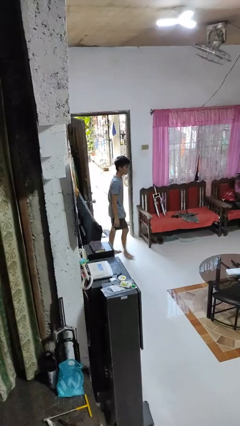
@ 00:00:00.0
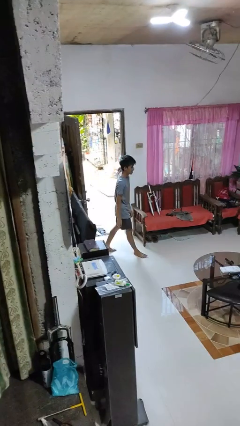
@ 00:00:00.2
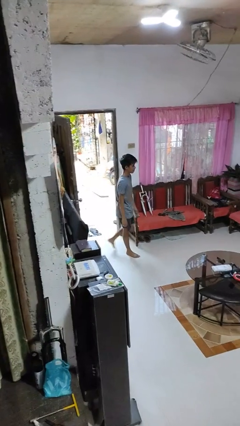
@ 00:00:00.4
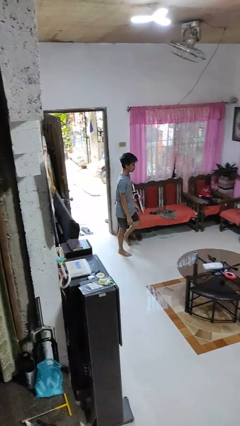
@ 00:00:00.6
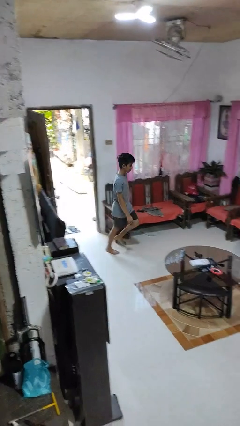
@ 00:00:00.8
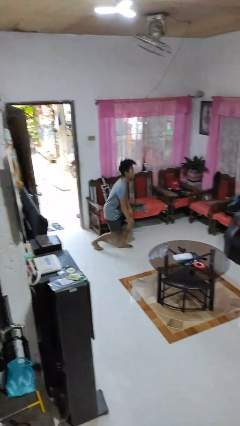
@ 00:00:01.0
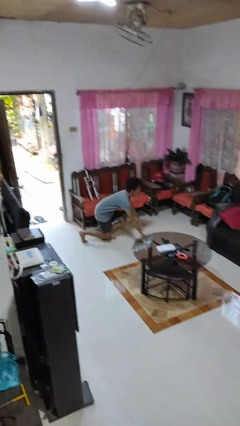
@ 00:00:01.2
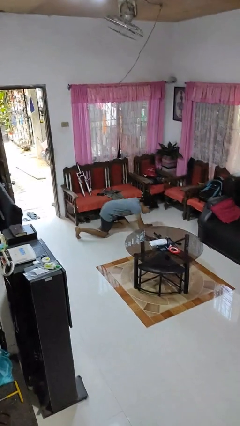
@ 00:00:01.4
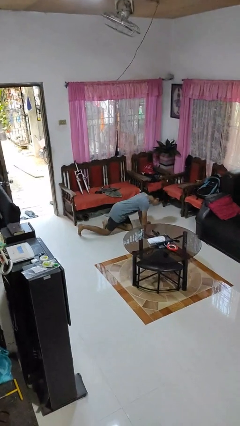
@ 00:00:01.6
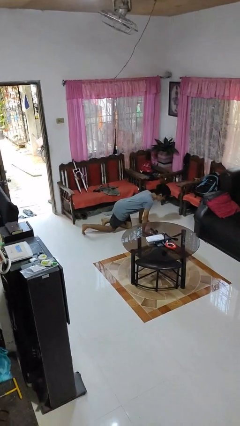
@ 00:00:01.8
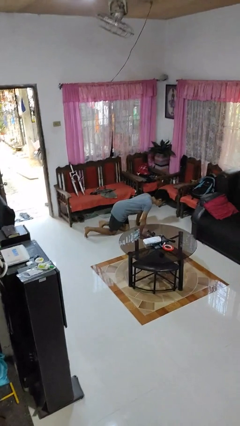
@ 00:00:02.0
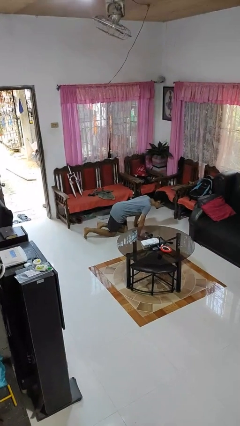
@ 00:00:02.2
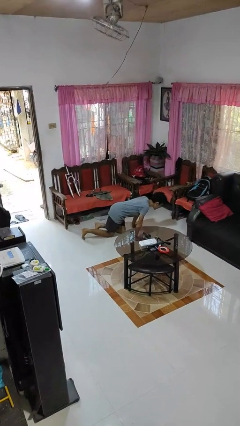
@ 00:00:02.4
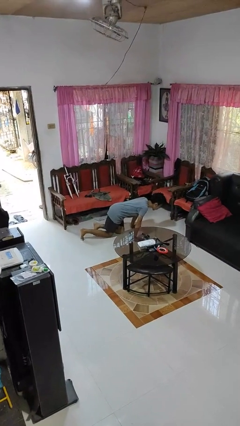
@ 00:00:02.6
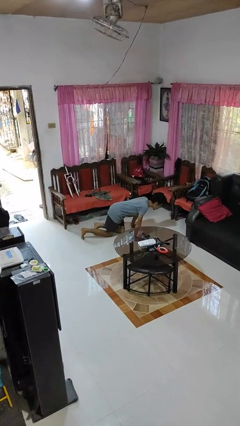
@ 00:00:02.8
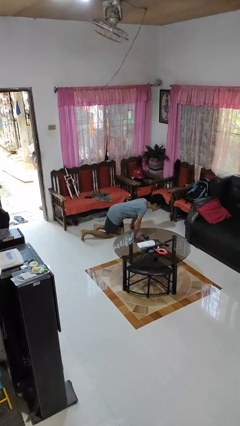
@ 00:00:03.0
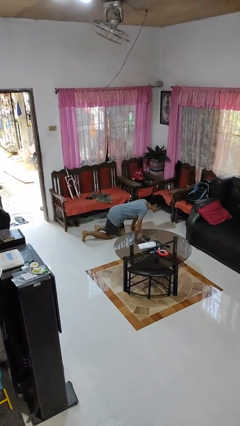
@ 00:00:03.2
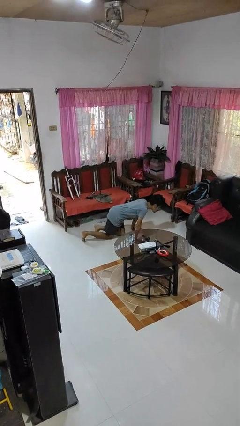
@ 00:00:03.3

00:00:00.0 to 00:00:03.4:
person trips on object on floor

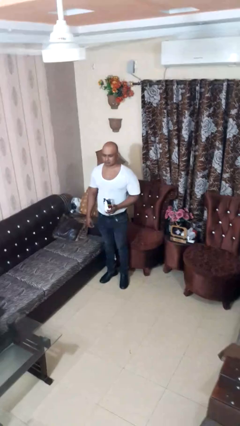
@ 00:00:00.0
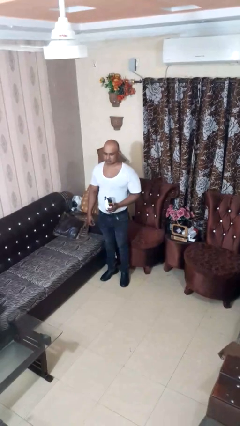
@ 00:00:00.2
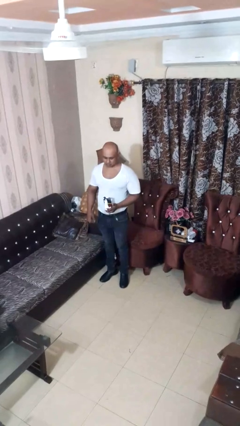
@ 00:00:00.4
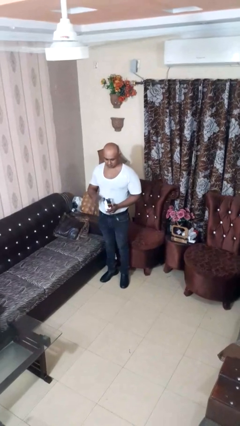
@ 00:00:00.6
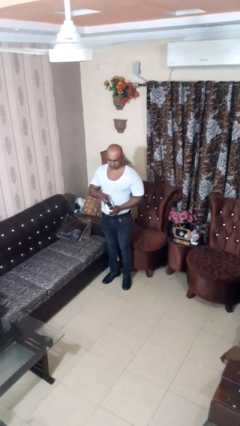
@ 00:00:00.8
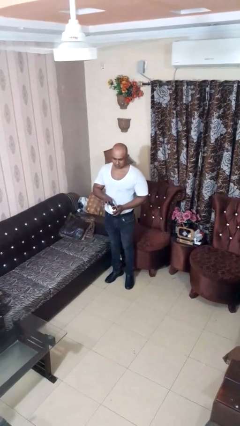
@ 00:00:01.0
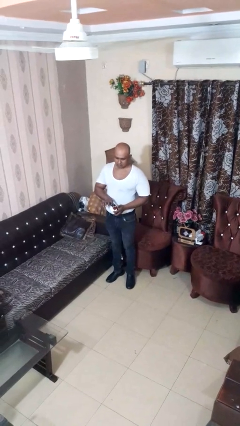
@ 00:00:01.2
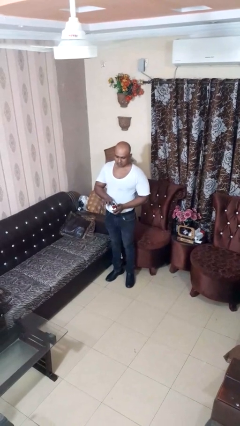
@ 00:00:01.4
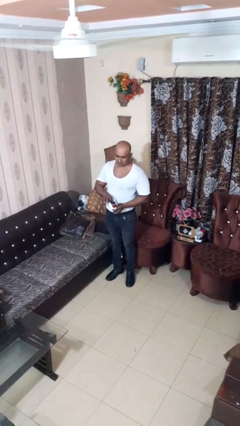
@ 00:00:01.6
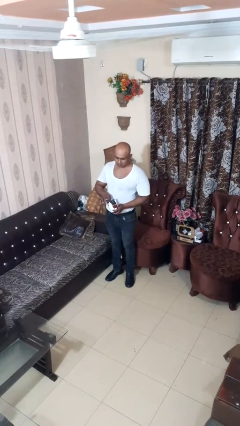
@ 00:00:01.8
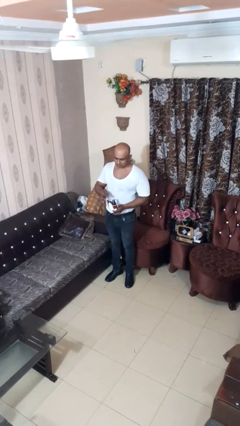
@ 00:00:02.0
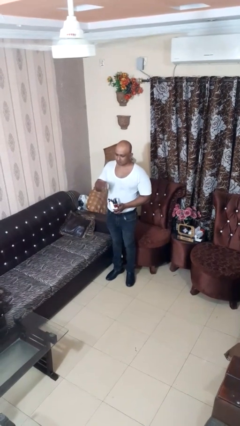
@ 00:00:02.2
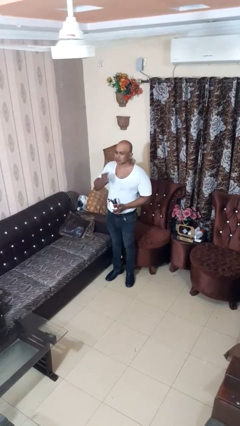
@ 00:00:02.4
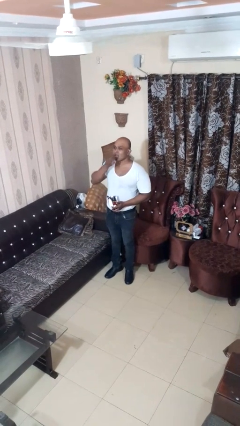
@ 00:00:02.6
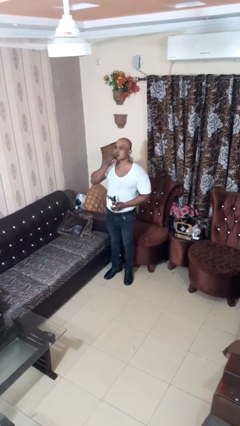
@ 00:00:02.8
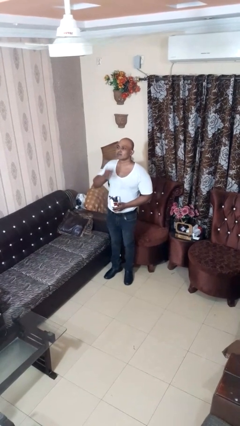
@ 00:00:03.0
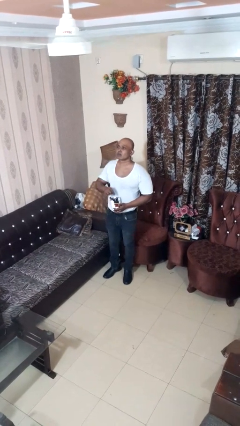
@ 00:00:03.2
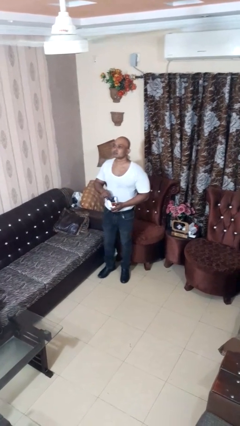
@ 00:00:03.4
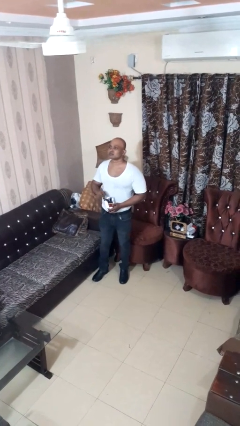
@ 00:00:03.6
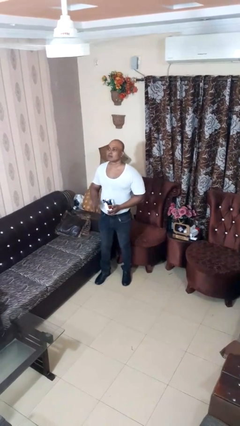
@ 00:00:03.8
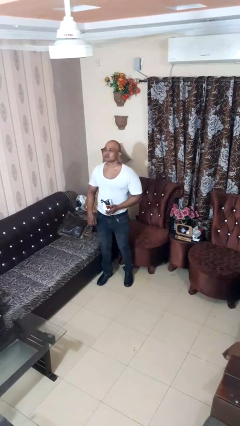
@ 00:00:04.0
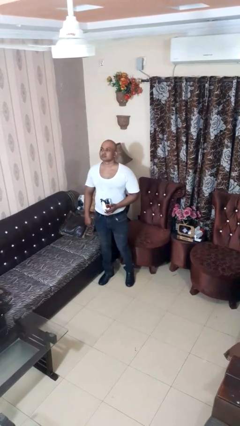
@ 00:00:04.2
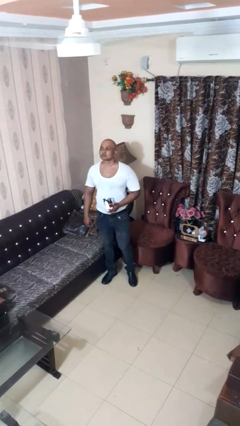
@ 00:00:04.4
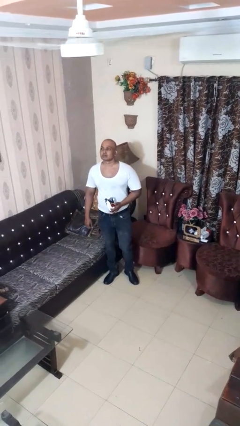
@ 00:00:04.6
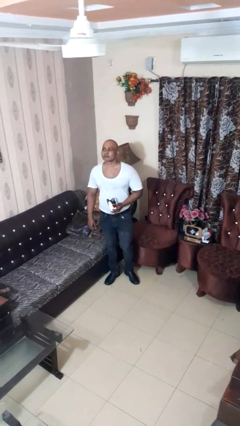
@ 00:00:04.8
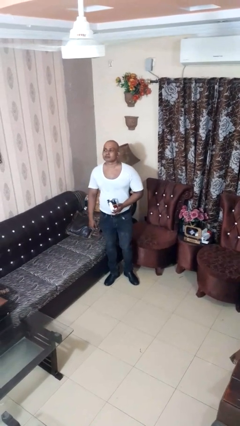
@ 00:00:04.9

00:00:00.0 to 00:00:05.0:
person eats snack from bag

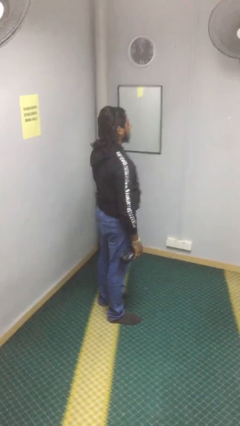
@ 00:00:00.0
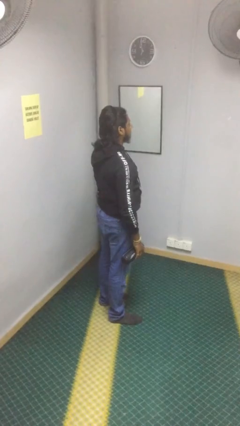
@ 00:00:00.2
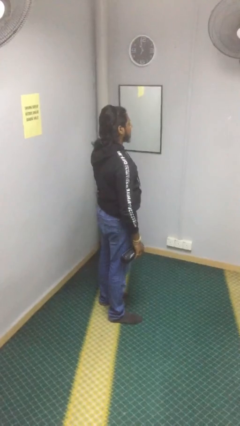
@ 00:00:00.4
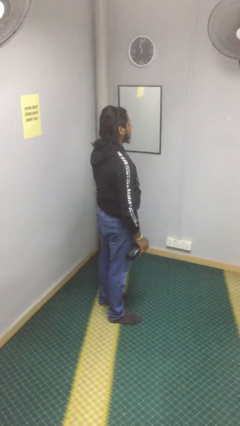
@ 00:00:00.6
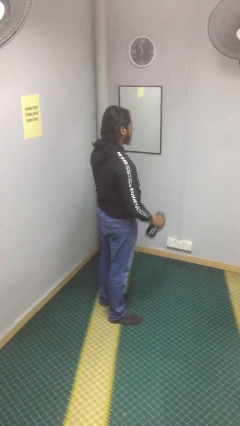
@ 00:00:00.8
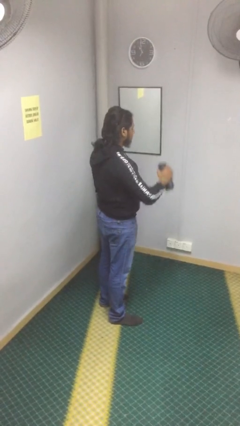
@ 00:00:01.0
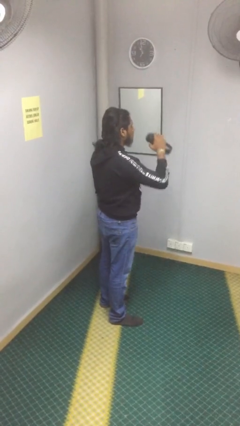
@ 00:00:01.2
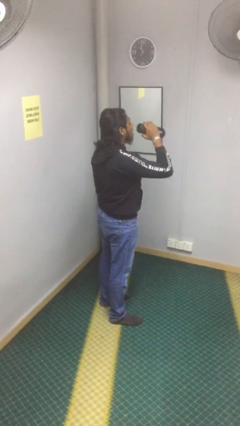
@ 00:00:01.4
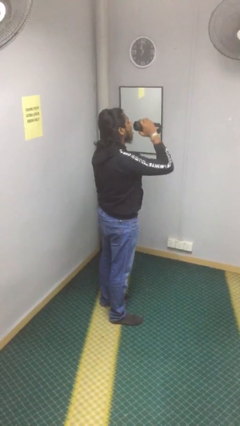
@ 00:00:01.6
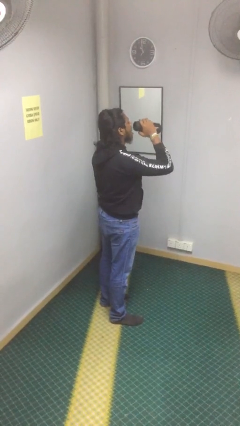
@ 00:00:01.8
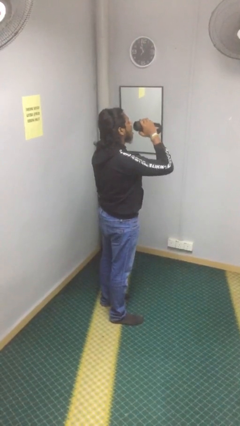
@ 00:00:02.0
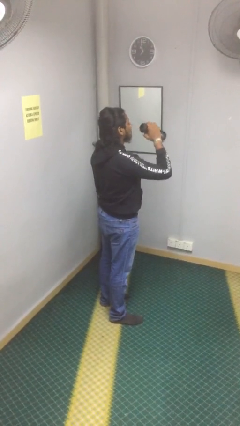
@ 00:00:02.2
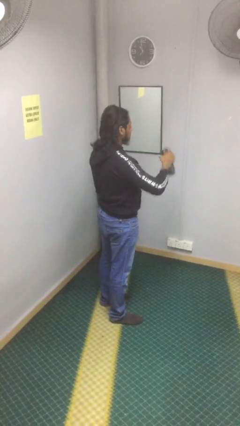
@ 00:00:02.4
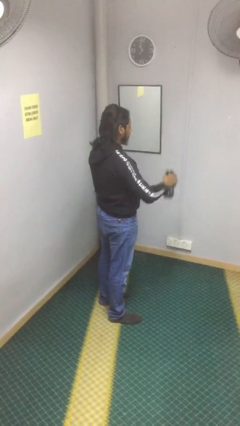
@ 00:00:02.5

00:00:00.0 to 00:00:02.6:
person drinks from bottle

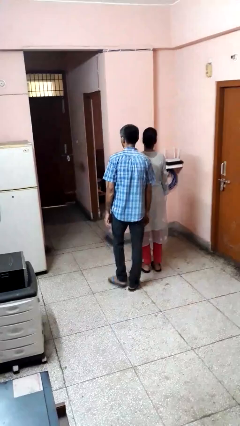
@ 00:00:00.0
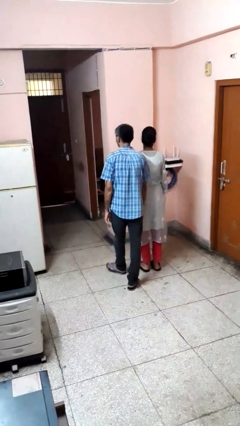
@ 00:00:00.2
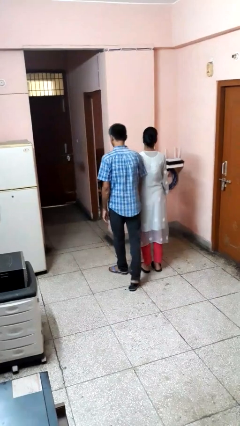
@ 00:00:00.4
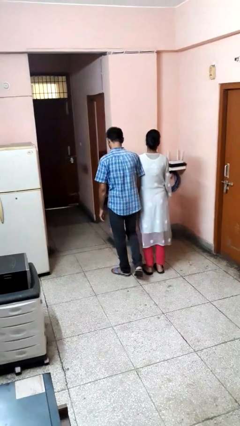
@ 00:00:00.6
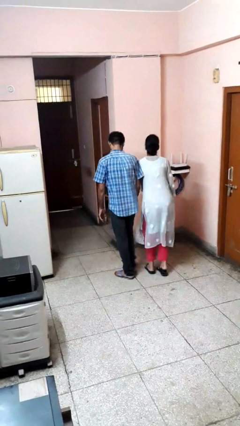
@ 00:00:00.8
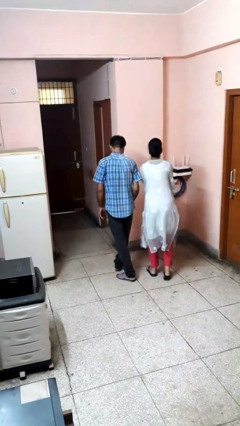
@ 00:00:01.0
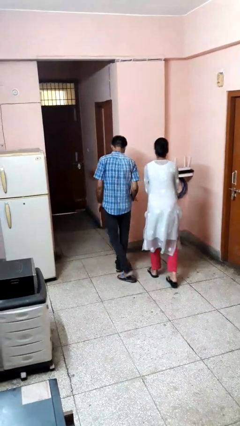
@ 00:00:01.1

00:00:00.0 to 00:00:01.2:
person bumps into person

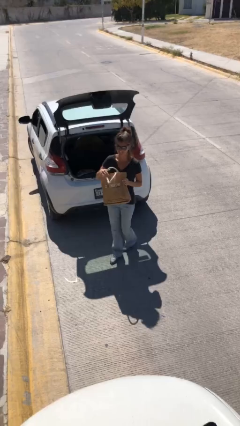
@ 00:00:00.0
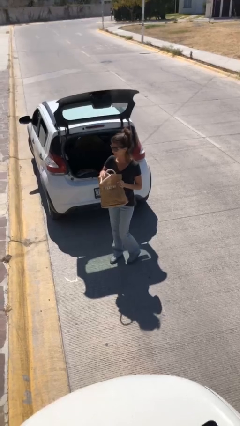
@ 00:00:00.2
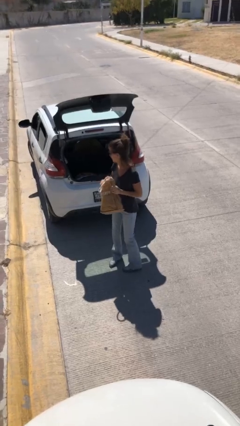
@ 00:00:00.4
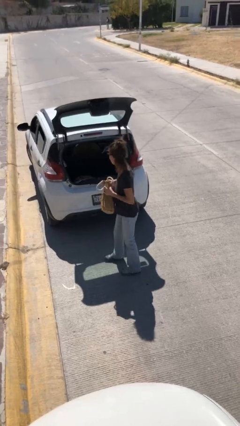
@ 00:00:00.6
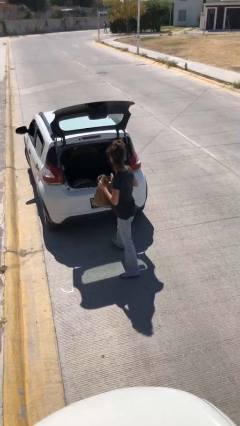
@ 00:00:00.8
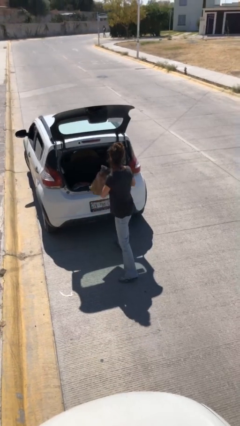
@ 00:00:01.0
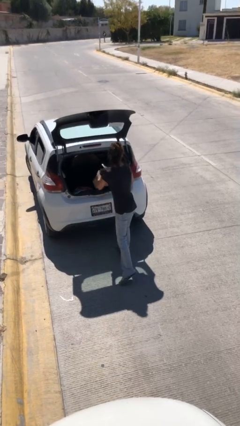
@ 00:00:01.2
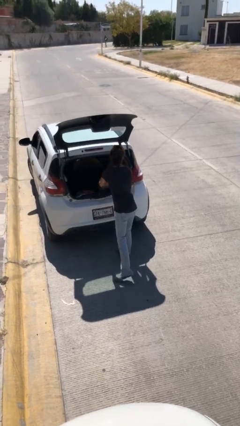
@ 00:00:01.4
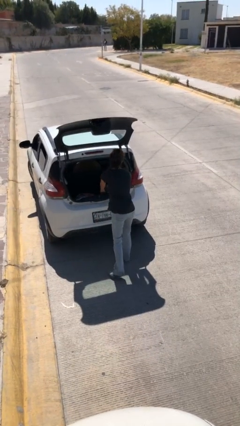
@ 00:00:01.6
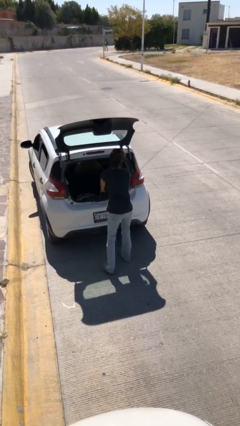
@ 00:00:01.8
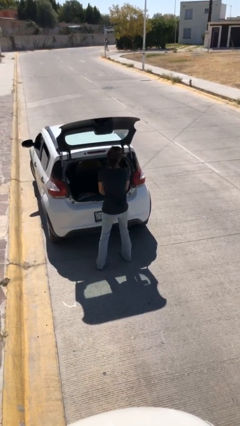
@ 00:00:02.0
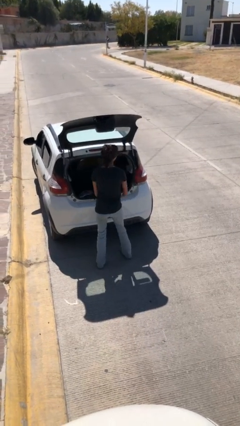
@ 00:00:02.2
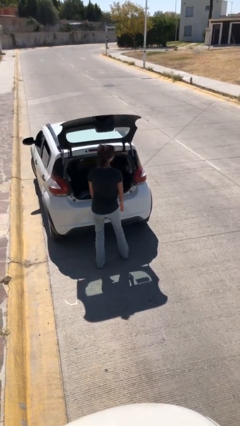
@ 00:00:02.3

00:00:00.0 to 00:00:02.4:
person loads car

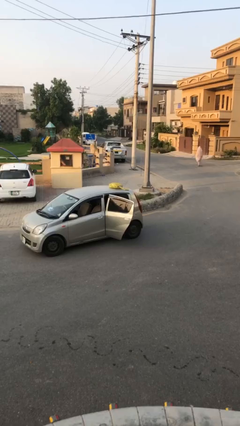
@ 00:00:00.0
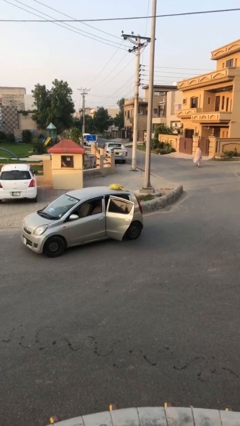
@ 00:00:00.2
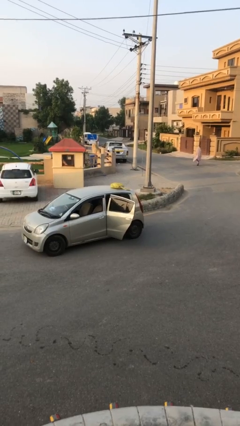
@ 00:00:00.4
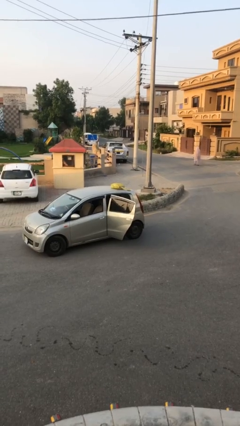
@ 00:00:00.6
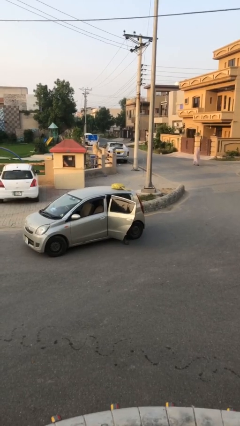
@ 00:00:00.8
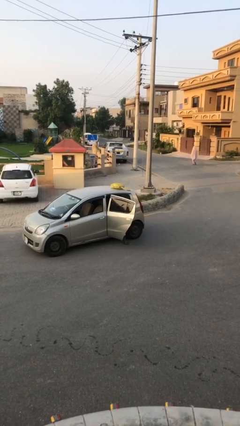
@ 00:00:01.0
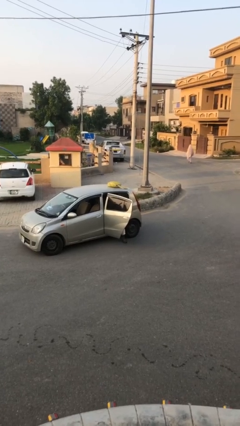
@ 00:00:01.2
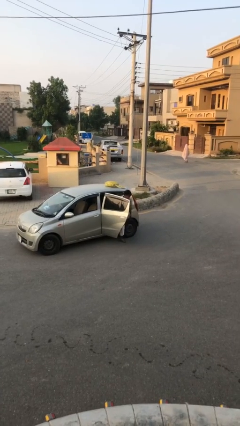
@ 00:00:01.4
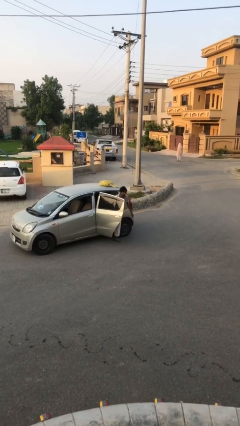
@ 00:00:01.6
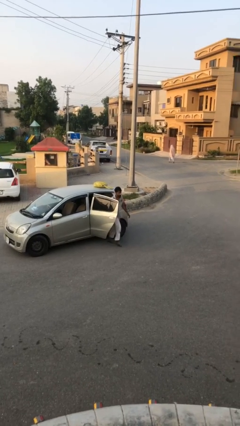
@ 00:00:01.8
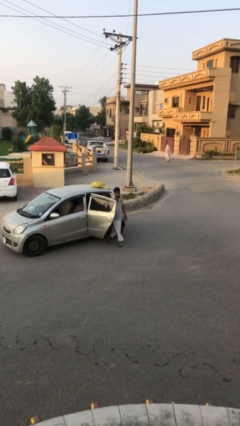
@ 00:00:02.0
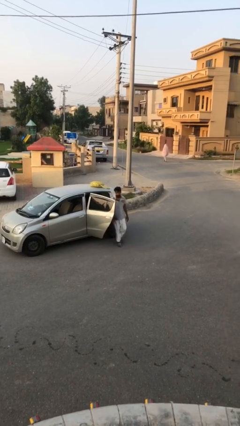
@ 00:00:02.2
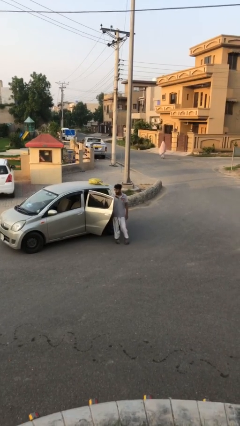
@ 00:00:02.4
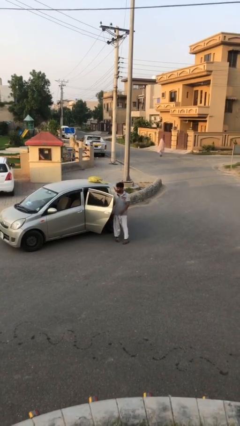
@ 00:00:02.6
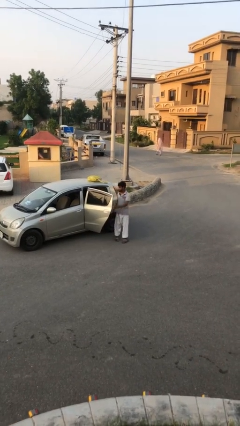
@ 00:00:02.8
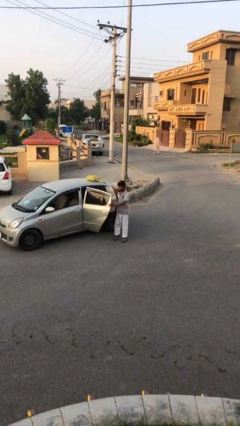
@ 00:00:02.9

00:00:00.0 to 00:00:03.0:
person exits car
